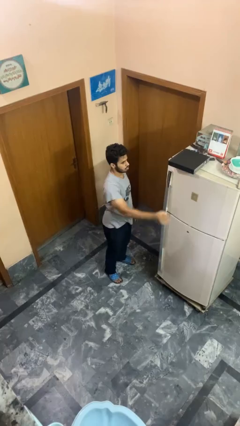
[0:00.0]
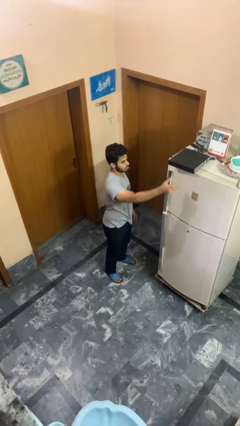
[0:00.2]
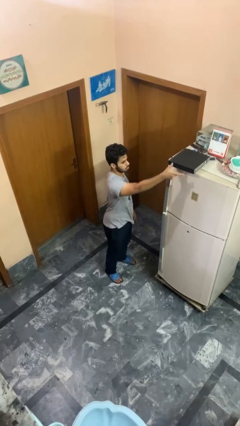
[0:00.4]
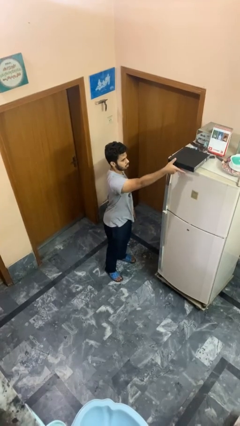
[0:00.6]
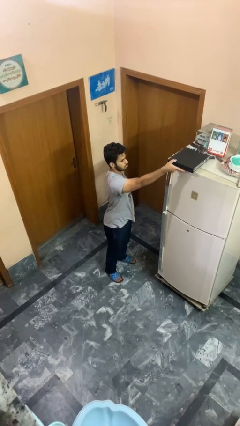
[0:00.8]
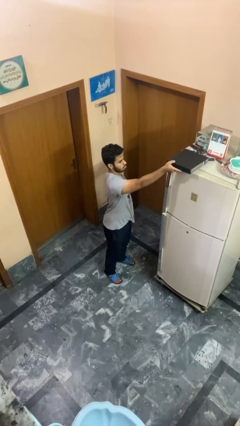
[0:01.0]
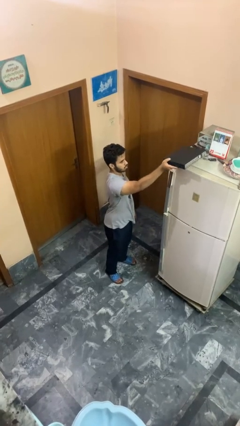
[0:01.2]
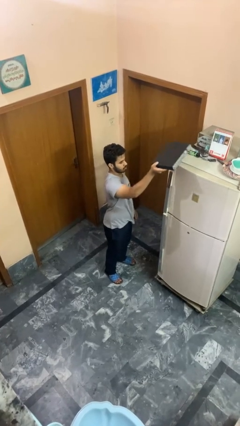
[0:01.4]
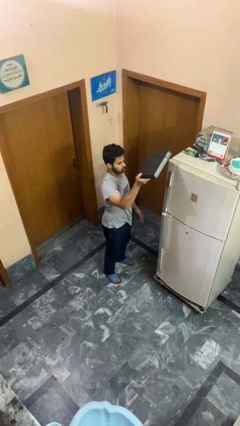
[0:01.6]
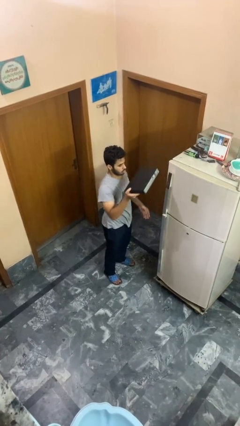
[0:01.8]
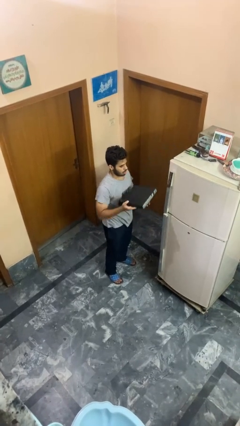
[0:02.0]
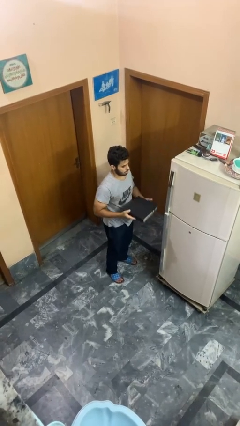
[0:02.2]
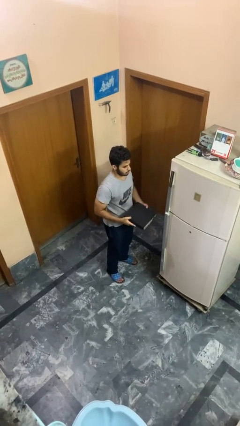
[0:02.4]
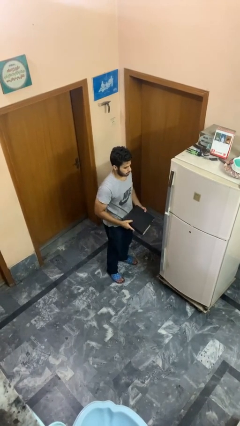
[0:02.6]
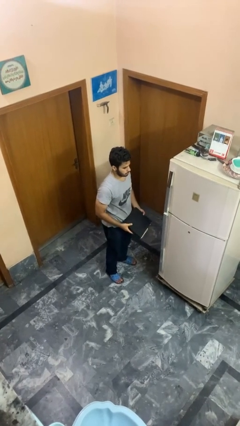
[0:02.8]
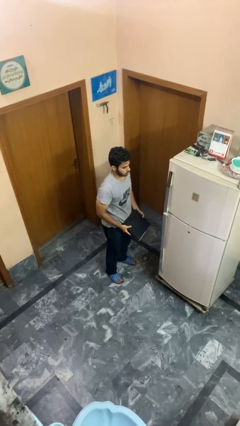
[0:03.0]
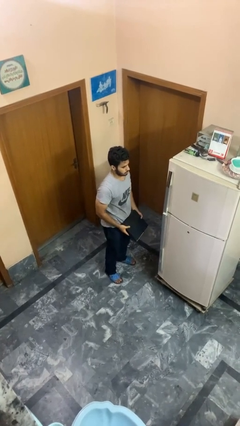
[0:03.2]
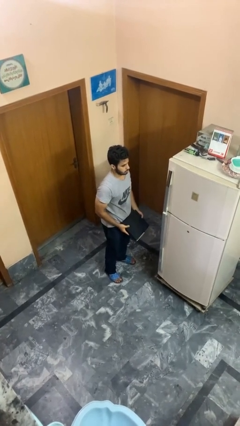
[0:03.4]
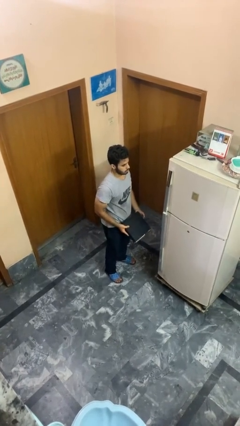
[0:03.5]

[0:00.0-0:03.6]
person picks up object from countertop

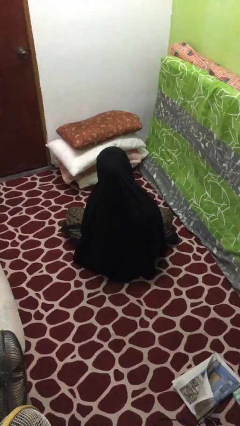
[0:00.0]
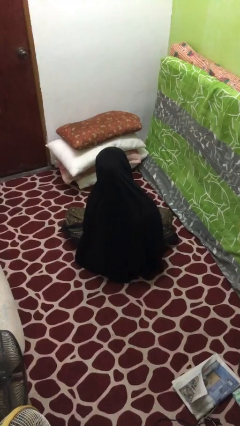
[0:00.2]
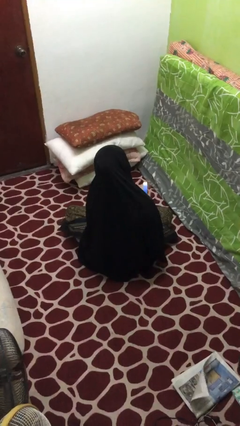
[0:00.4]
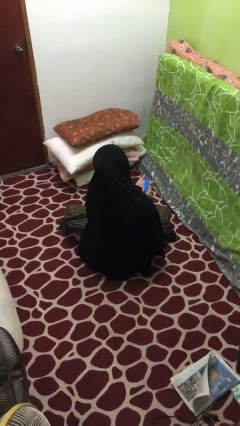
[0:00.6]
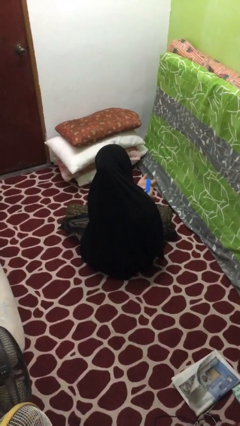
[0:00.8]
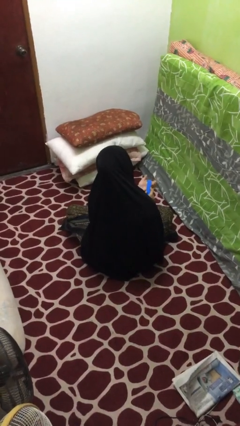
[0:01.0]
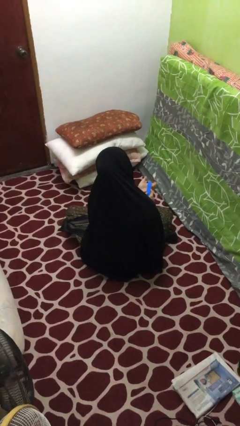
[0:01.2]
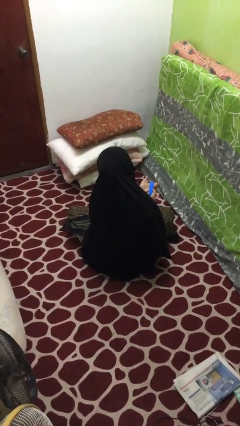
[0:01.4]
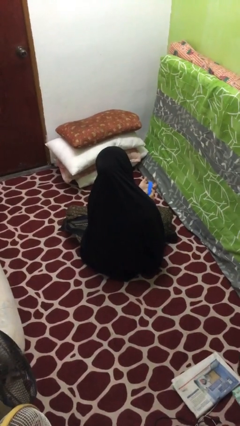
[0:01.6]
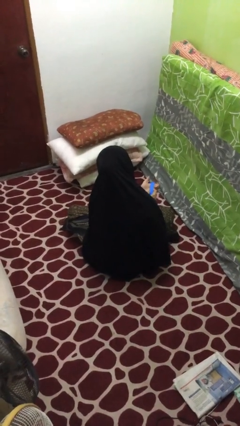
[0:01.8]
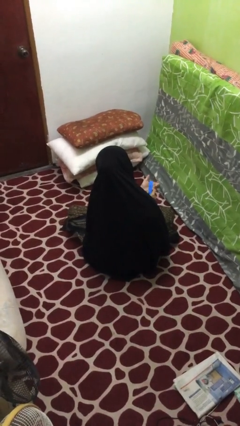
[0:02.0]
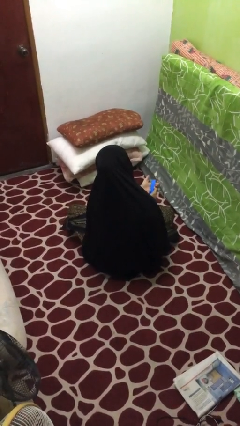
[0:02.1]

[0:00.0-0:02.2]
person files fingernails

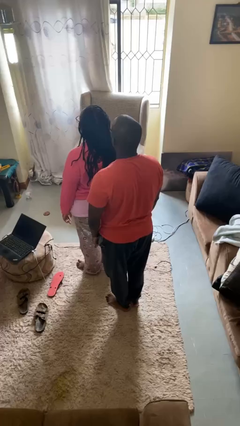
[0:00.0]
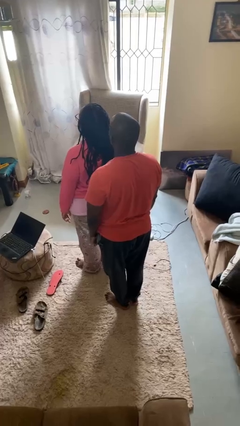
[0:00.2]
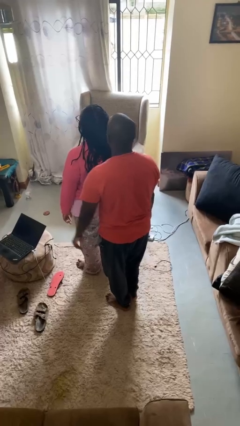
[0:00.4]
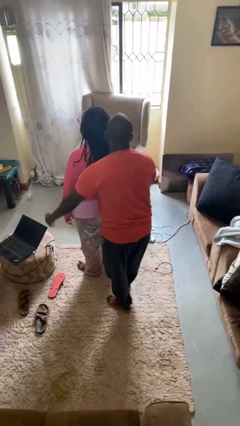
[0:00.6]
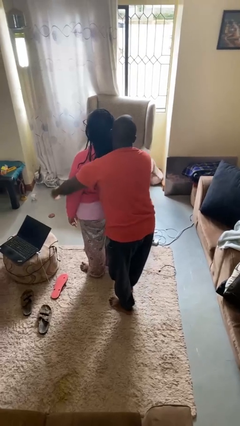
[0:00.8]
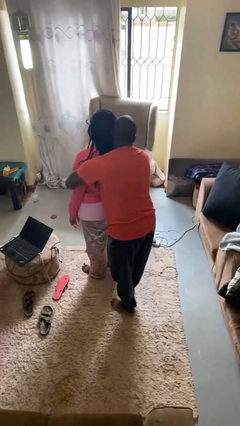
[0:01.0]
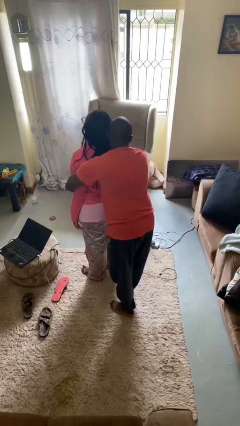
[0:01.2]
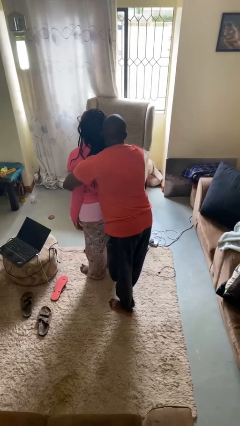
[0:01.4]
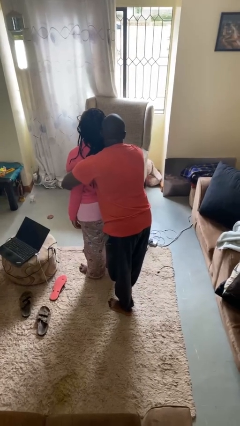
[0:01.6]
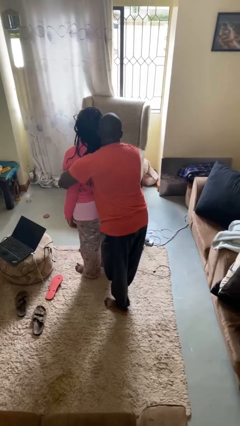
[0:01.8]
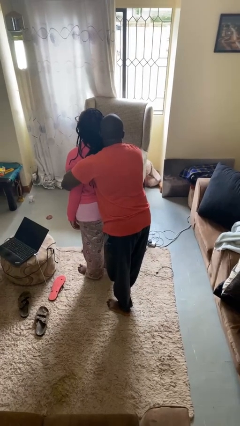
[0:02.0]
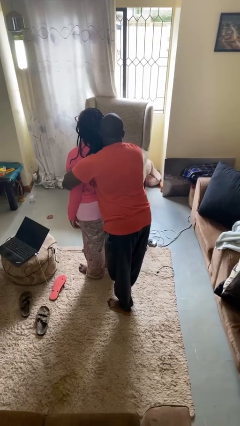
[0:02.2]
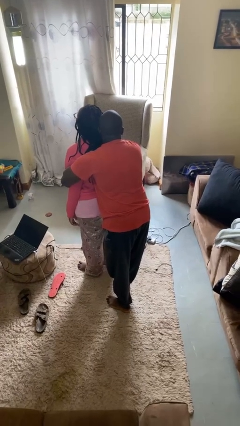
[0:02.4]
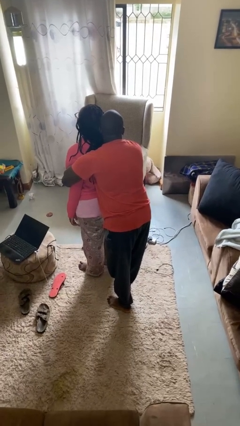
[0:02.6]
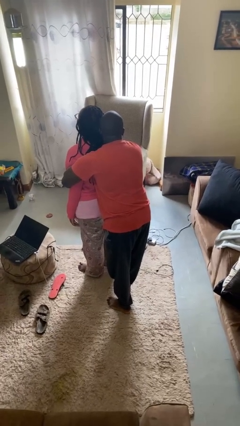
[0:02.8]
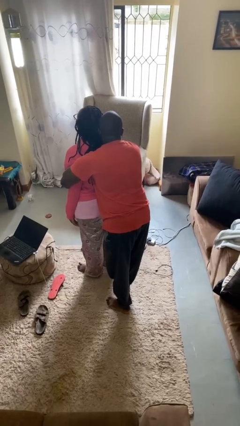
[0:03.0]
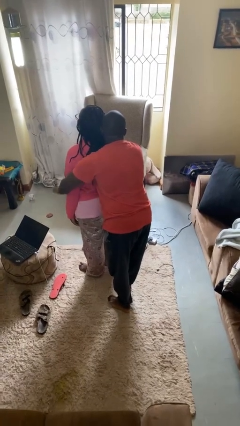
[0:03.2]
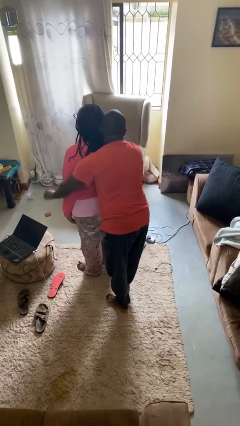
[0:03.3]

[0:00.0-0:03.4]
person hugs person from behind

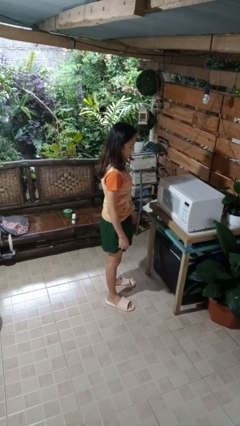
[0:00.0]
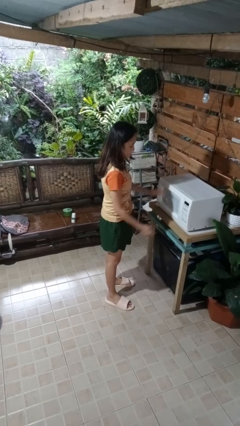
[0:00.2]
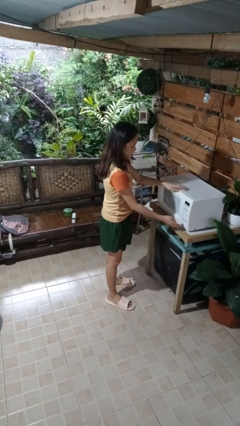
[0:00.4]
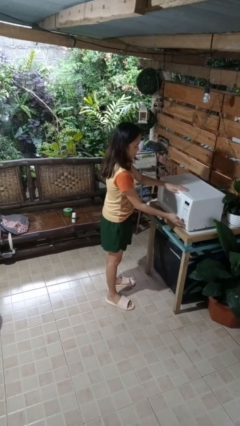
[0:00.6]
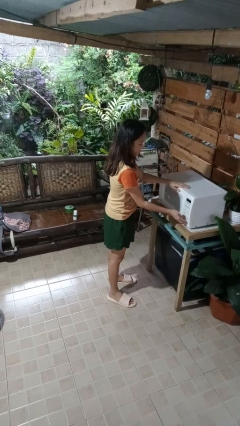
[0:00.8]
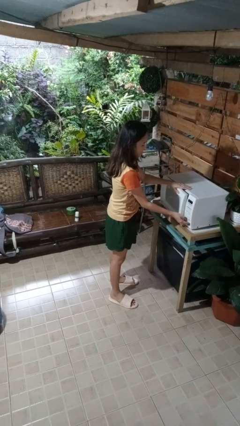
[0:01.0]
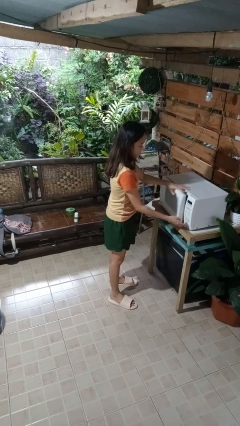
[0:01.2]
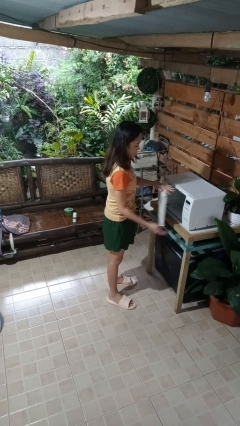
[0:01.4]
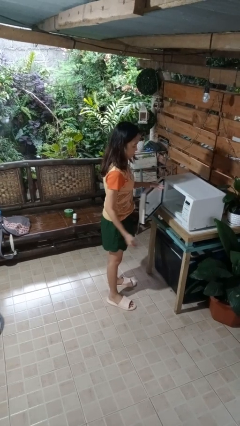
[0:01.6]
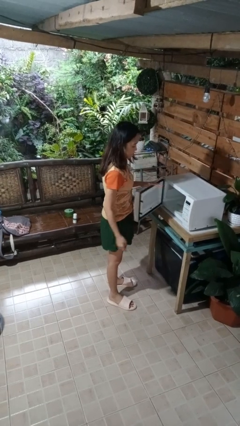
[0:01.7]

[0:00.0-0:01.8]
person opens microwave

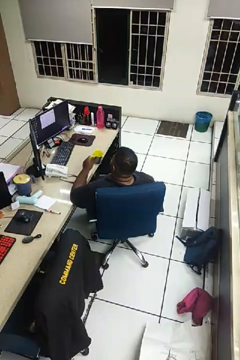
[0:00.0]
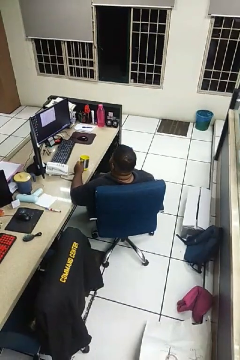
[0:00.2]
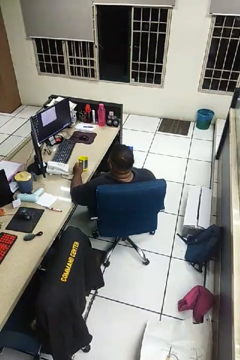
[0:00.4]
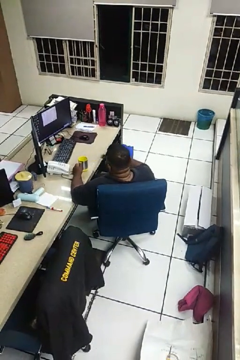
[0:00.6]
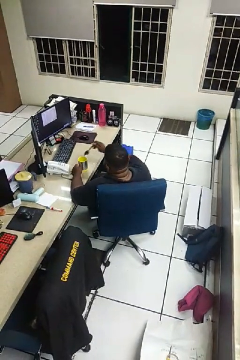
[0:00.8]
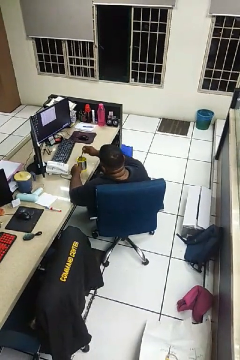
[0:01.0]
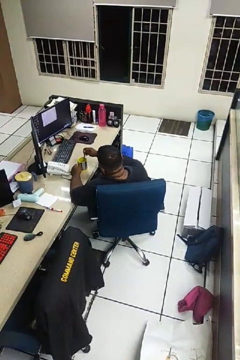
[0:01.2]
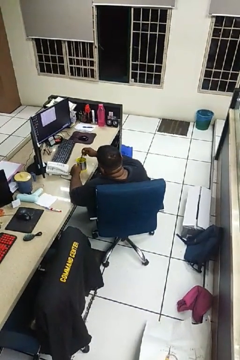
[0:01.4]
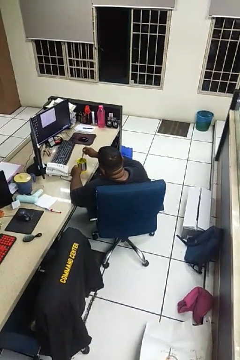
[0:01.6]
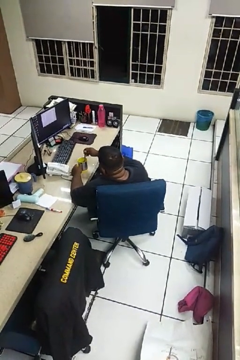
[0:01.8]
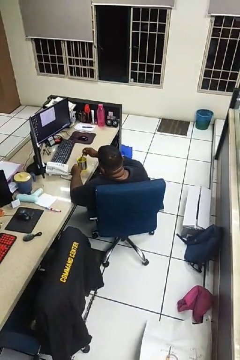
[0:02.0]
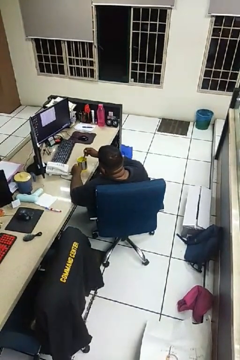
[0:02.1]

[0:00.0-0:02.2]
person stirs mug

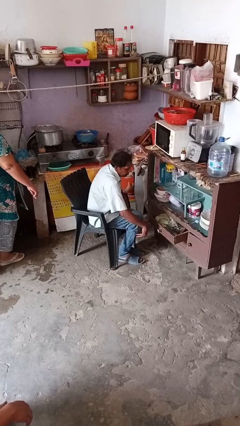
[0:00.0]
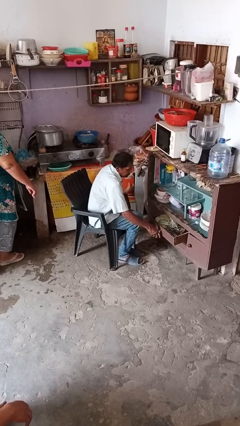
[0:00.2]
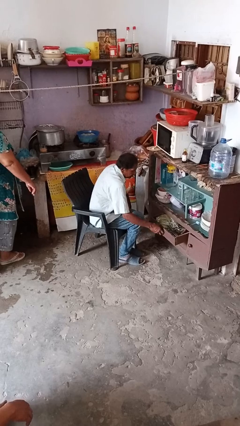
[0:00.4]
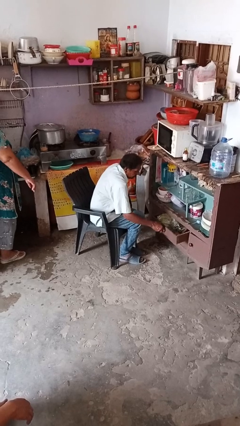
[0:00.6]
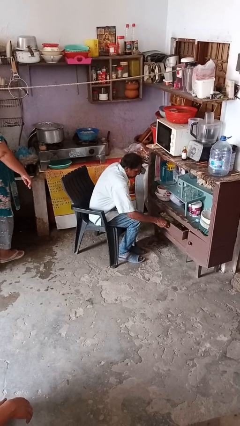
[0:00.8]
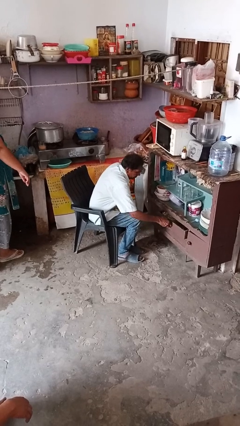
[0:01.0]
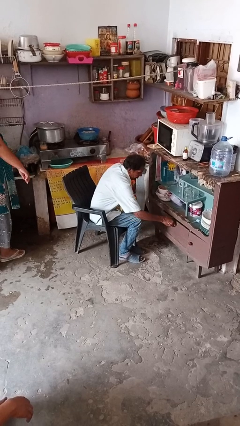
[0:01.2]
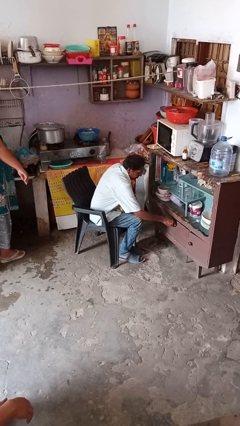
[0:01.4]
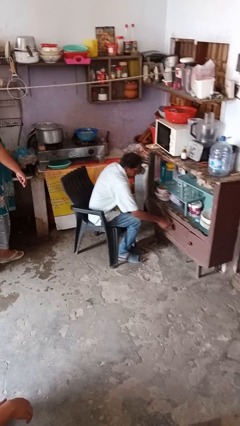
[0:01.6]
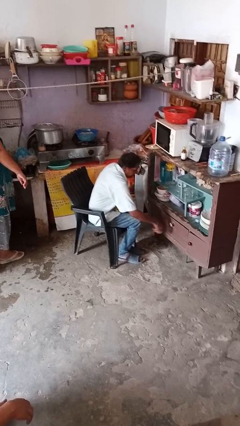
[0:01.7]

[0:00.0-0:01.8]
person closes dresser drawer

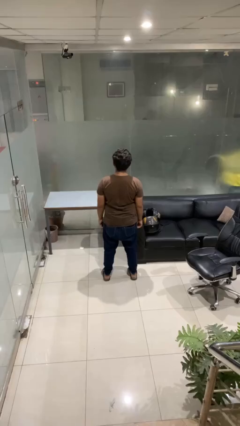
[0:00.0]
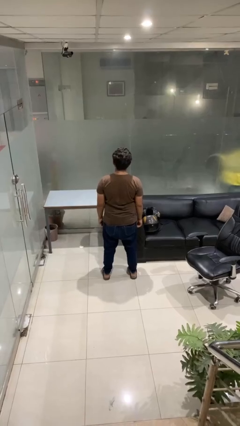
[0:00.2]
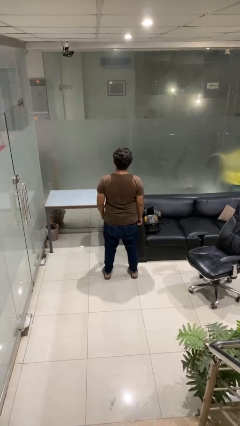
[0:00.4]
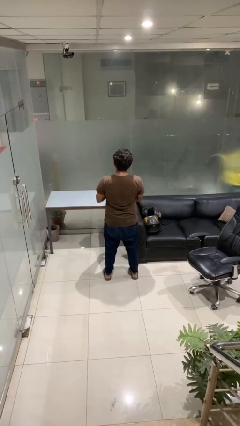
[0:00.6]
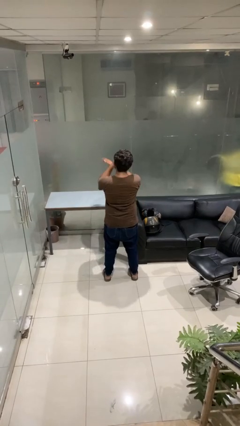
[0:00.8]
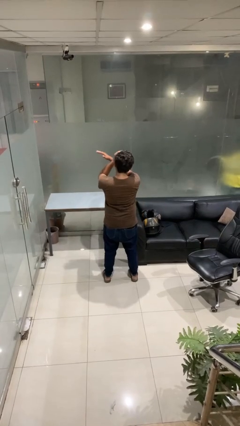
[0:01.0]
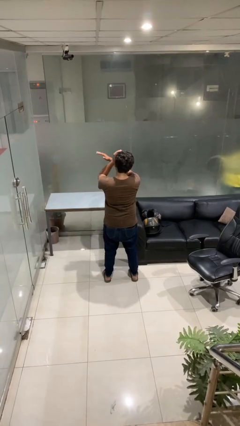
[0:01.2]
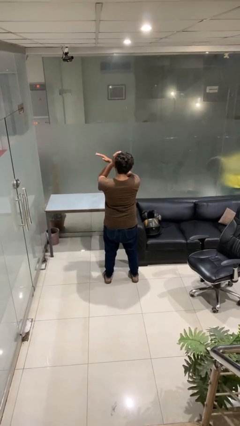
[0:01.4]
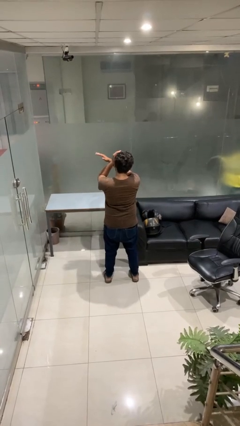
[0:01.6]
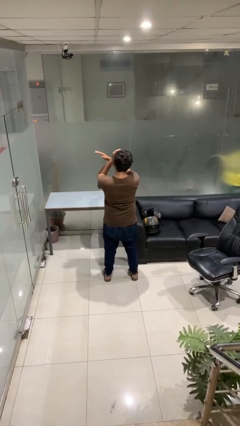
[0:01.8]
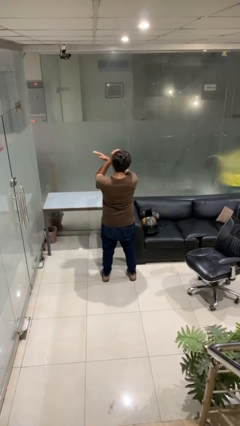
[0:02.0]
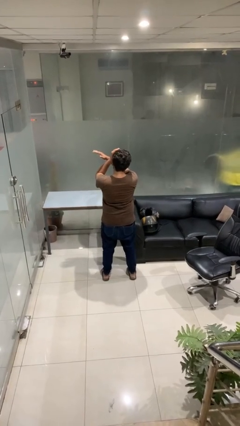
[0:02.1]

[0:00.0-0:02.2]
person gestures arms x

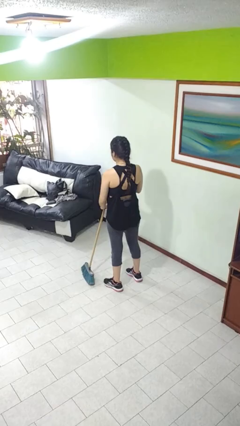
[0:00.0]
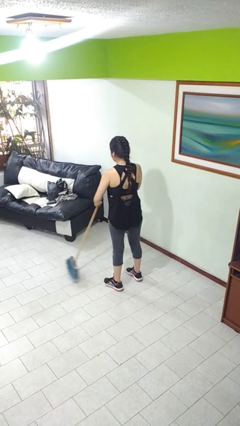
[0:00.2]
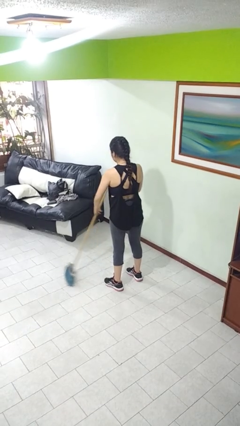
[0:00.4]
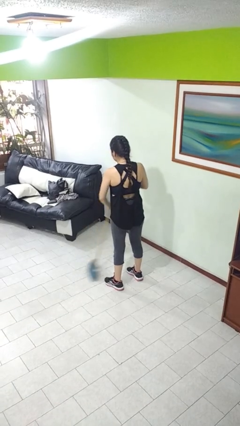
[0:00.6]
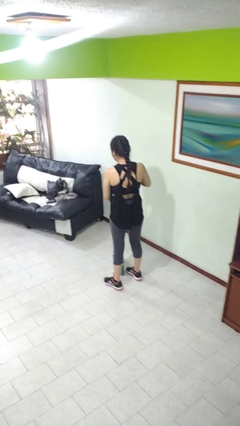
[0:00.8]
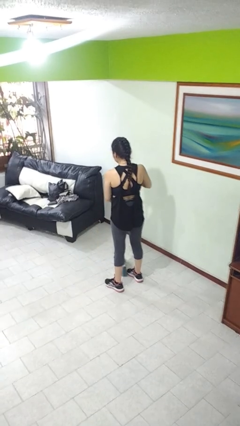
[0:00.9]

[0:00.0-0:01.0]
person sweeps floor
